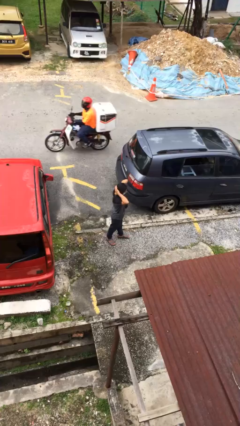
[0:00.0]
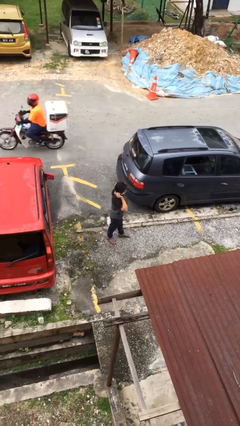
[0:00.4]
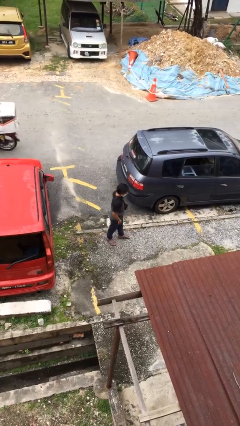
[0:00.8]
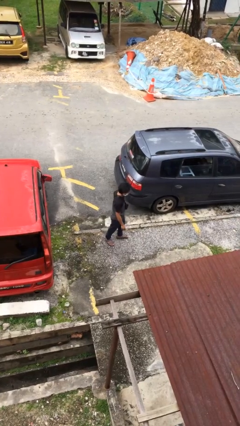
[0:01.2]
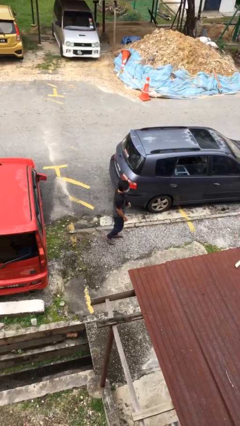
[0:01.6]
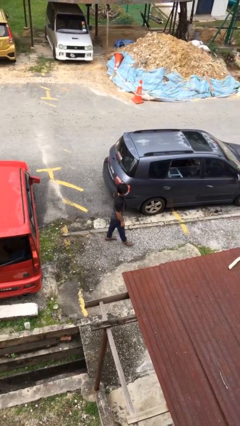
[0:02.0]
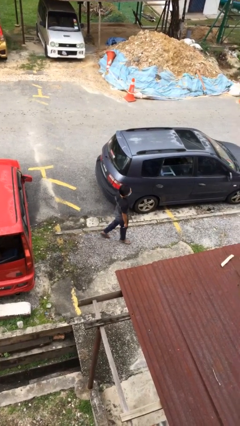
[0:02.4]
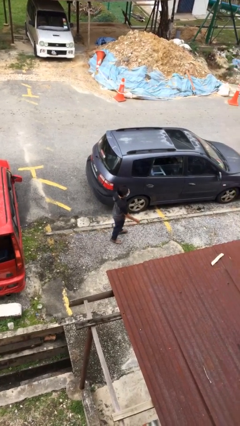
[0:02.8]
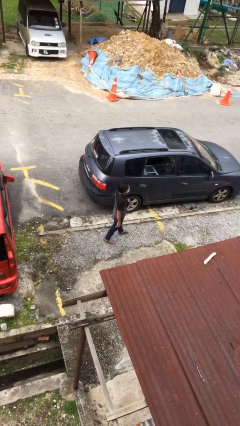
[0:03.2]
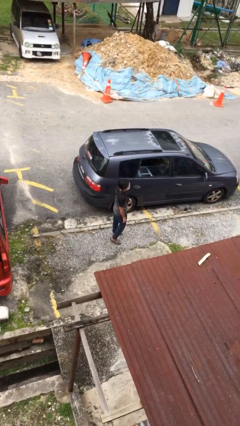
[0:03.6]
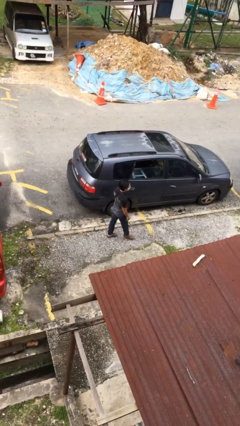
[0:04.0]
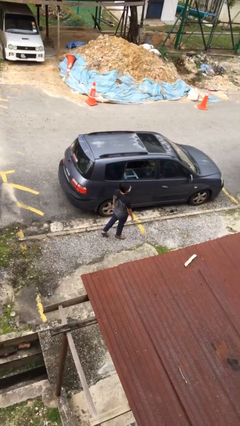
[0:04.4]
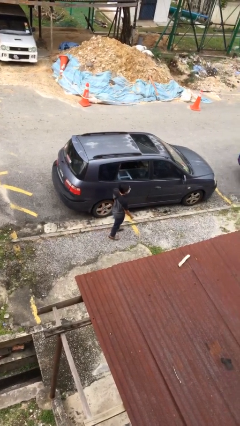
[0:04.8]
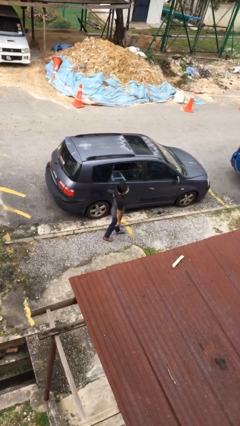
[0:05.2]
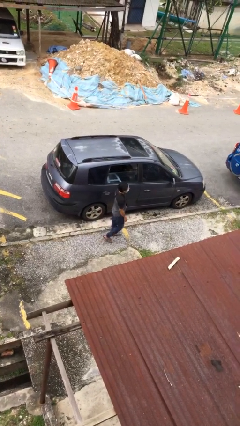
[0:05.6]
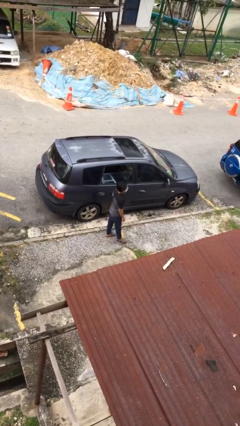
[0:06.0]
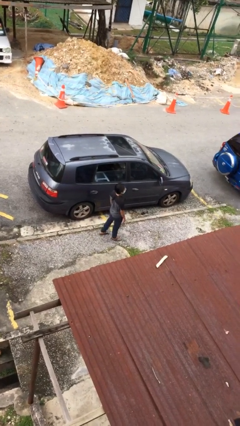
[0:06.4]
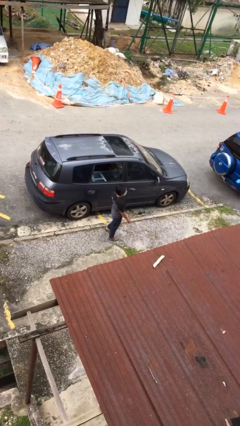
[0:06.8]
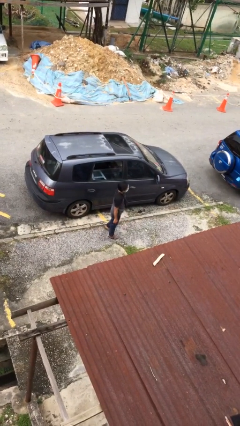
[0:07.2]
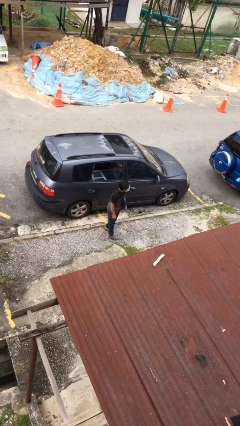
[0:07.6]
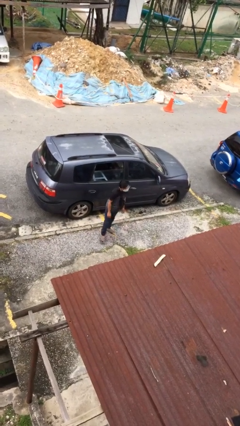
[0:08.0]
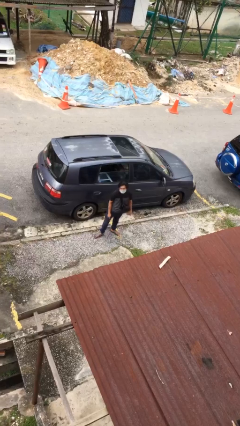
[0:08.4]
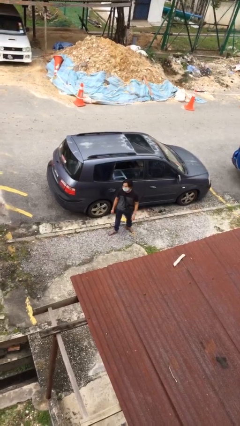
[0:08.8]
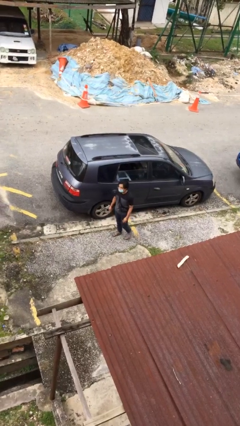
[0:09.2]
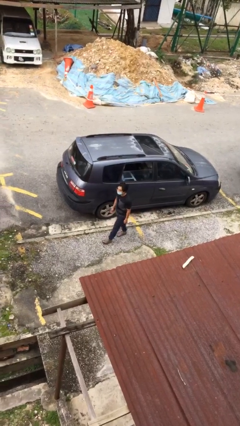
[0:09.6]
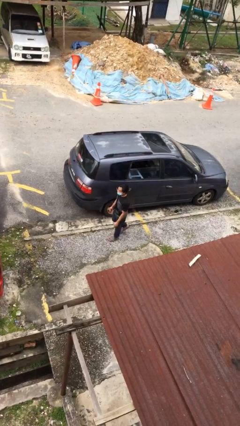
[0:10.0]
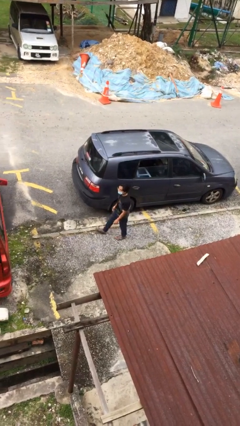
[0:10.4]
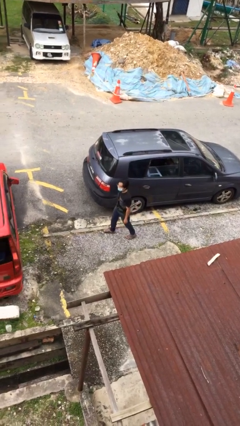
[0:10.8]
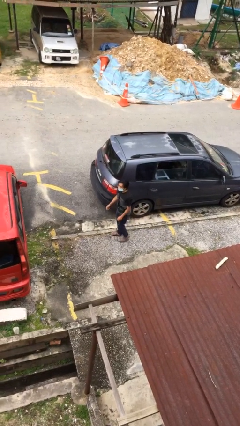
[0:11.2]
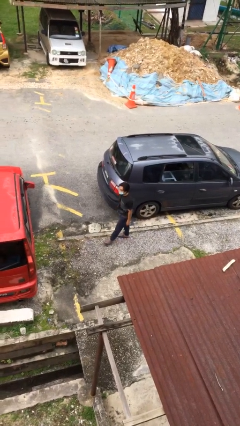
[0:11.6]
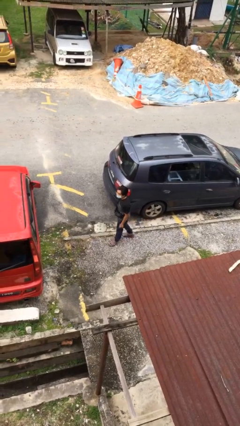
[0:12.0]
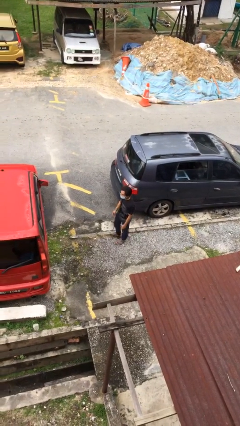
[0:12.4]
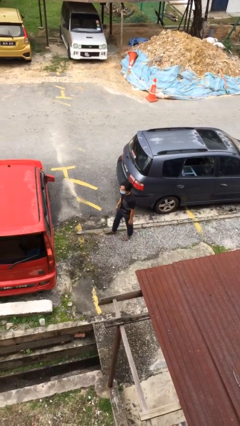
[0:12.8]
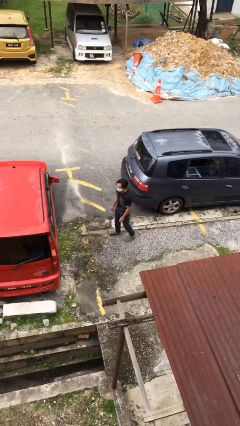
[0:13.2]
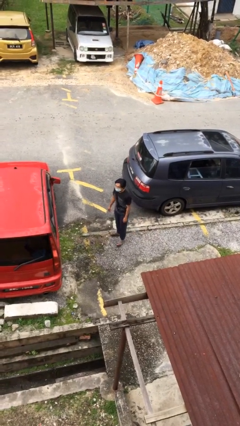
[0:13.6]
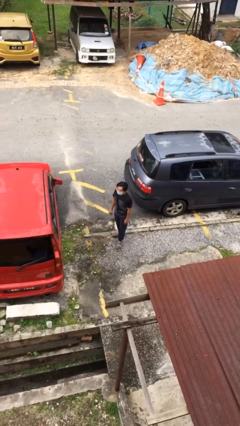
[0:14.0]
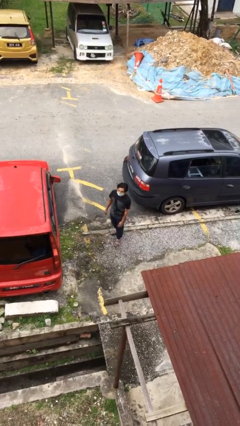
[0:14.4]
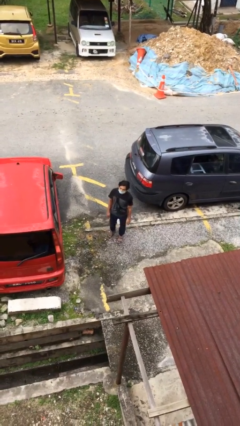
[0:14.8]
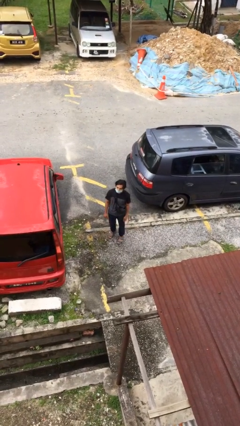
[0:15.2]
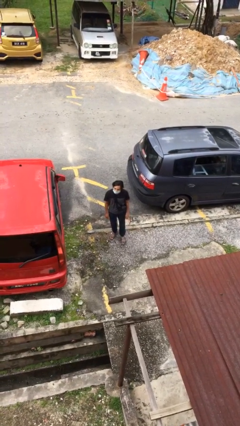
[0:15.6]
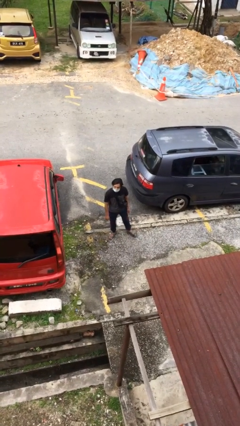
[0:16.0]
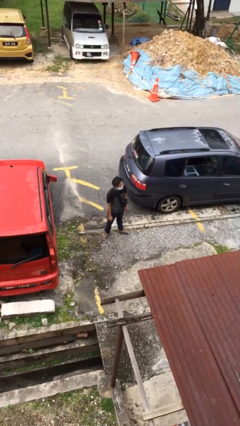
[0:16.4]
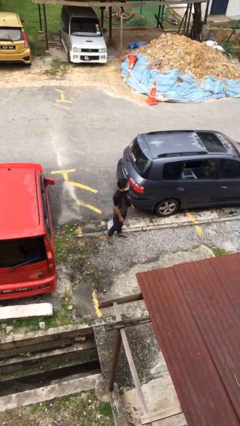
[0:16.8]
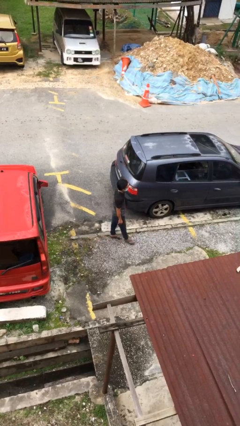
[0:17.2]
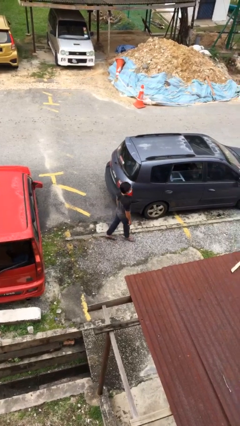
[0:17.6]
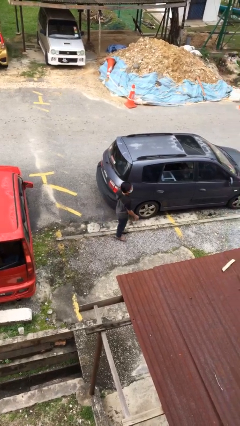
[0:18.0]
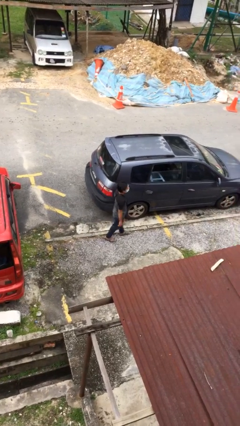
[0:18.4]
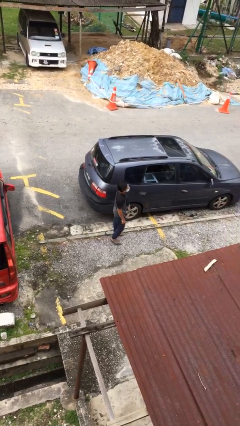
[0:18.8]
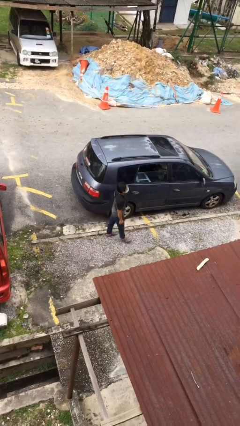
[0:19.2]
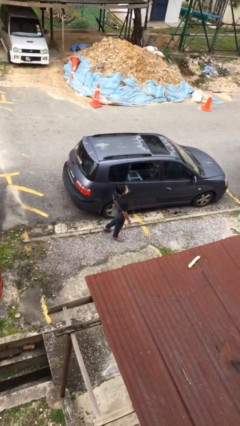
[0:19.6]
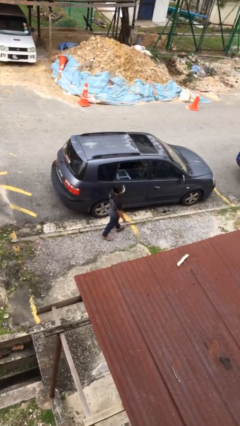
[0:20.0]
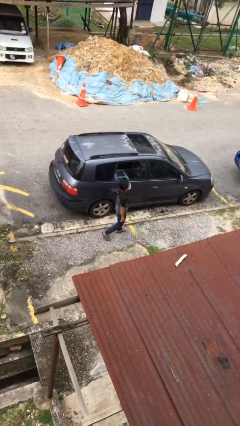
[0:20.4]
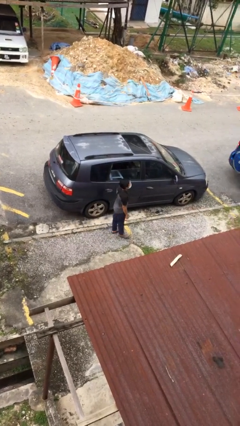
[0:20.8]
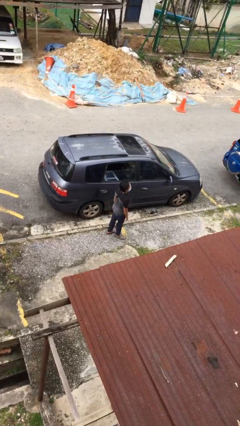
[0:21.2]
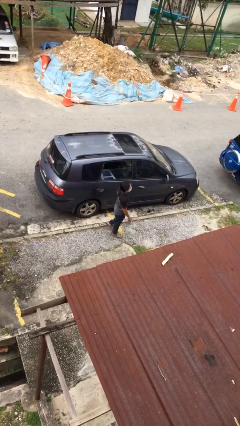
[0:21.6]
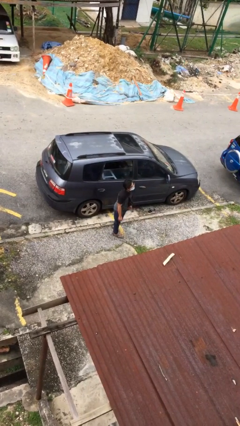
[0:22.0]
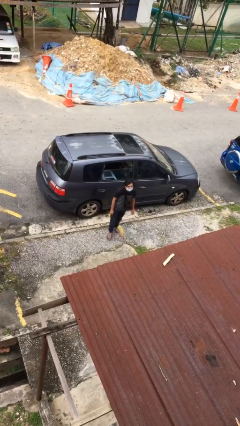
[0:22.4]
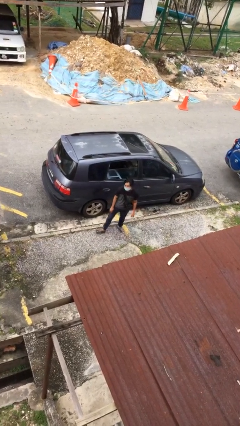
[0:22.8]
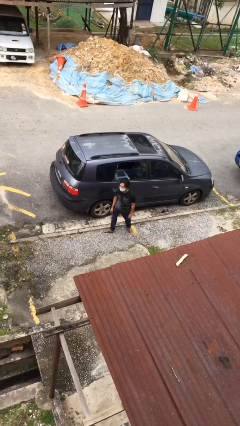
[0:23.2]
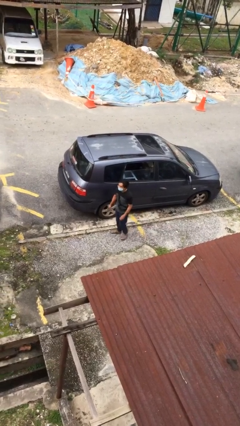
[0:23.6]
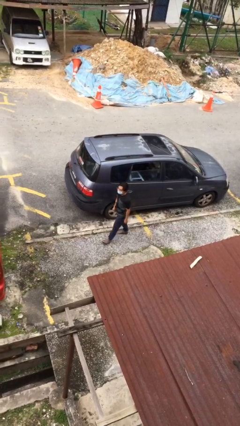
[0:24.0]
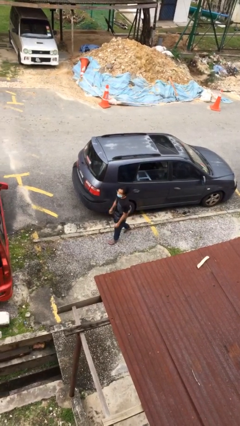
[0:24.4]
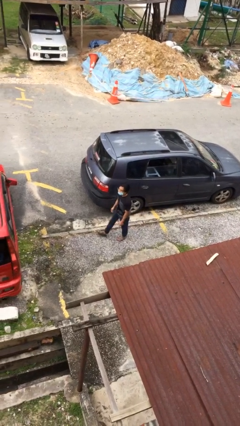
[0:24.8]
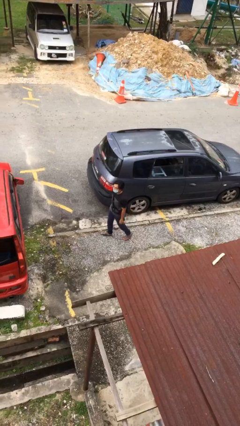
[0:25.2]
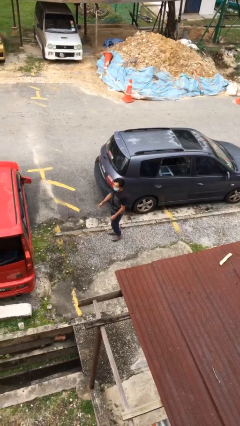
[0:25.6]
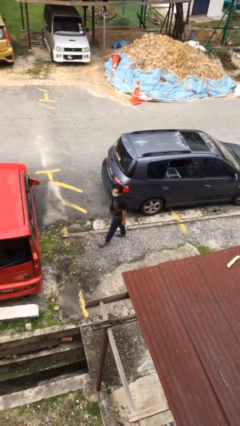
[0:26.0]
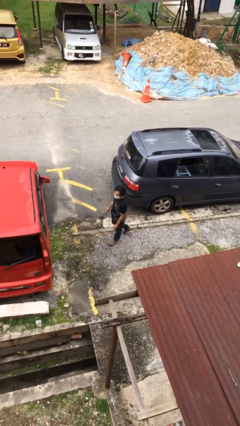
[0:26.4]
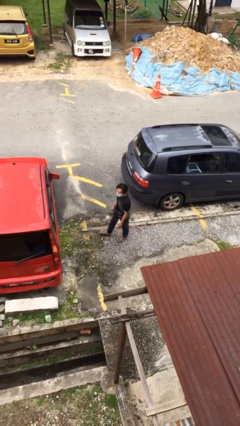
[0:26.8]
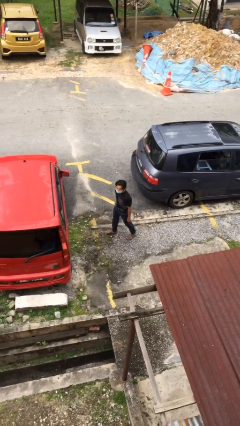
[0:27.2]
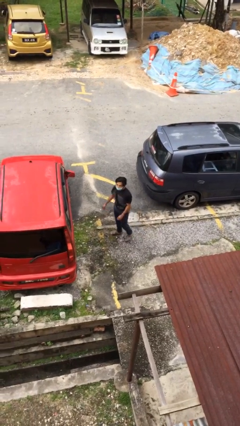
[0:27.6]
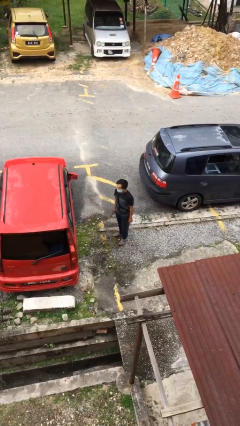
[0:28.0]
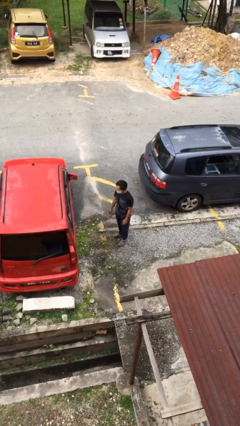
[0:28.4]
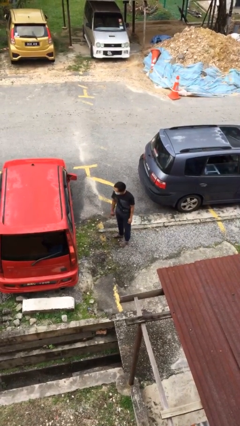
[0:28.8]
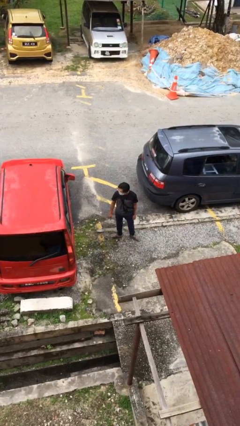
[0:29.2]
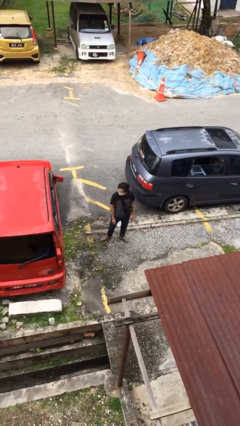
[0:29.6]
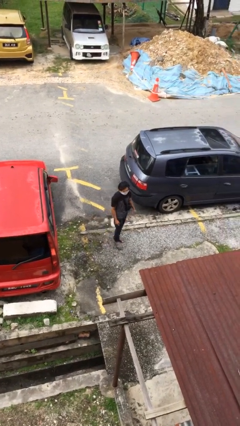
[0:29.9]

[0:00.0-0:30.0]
person walks

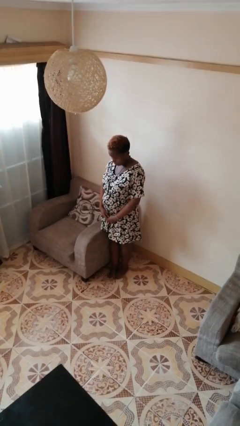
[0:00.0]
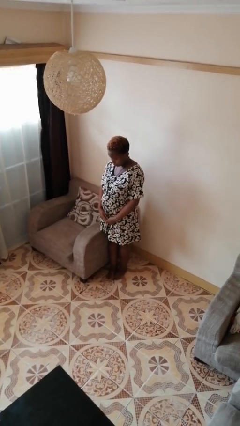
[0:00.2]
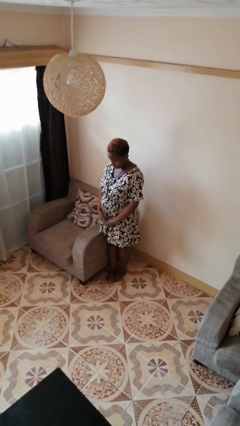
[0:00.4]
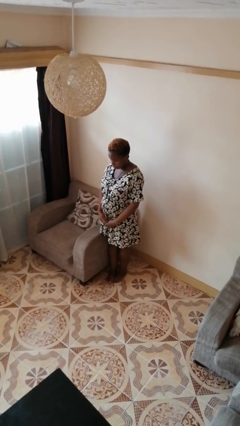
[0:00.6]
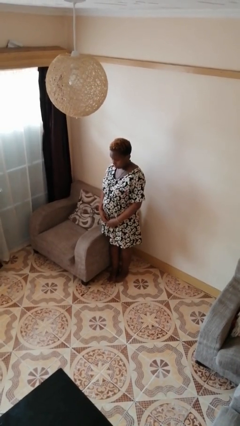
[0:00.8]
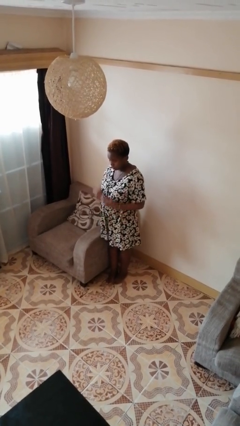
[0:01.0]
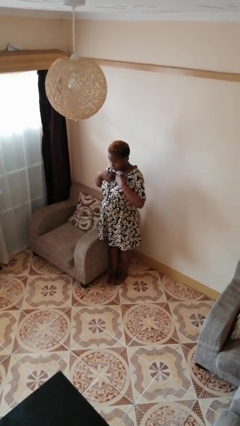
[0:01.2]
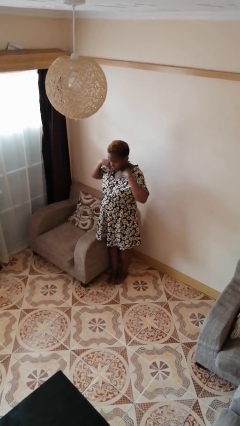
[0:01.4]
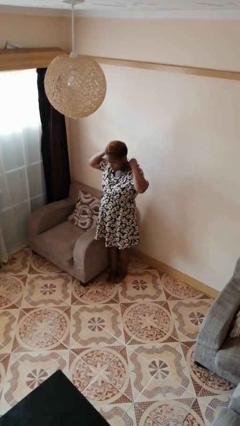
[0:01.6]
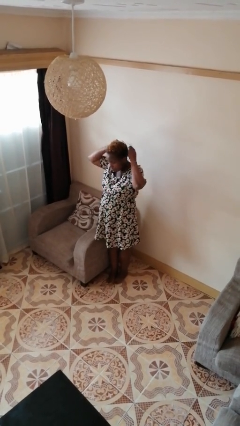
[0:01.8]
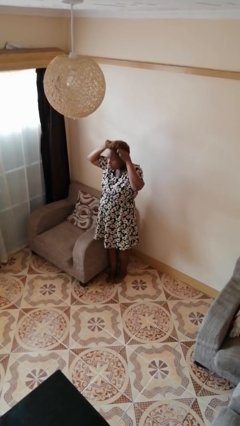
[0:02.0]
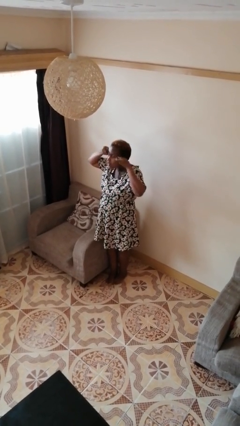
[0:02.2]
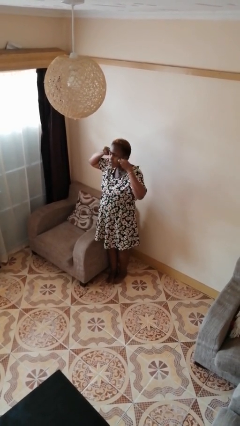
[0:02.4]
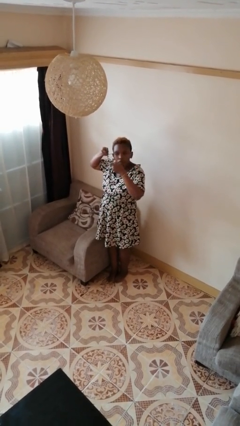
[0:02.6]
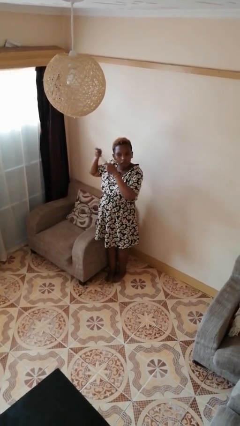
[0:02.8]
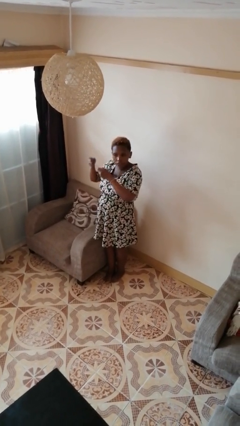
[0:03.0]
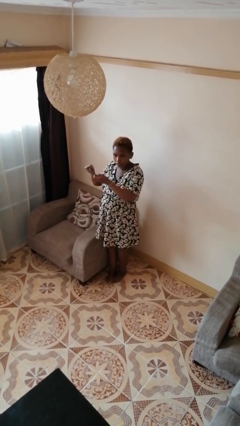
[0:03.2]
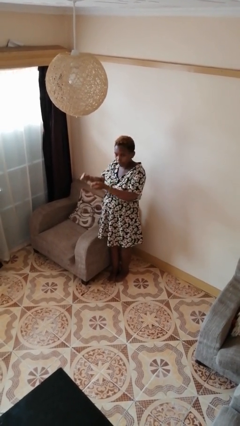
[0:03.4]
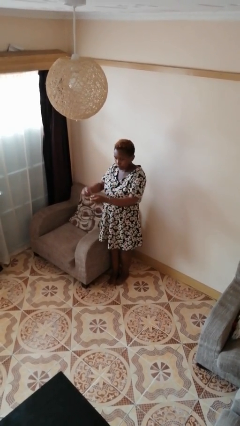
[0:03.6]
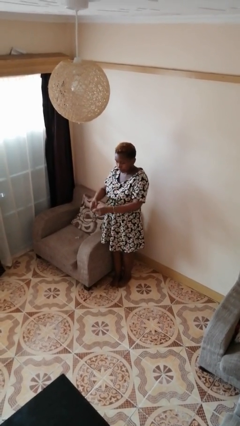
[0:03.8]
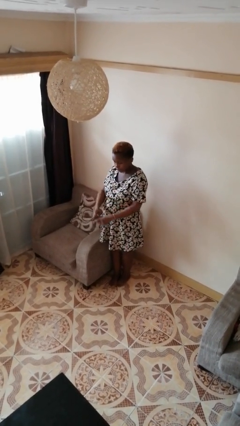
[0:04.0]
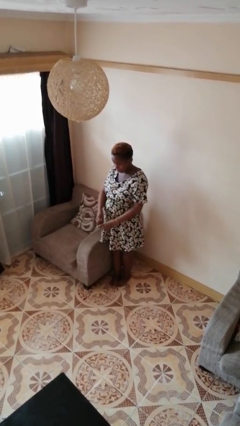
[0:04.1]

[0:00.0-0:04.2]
person takes off necklace
